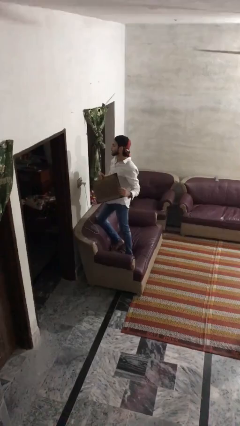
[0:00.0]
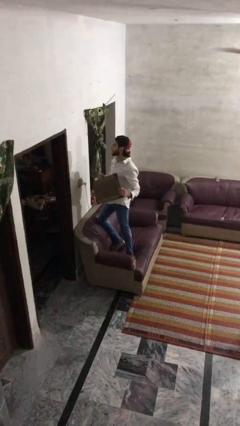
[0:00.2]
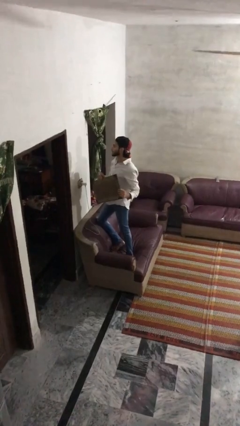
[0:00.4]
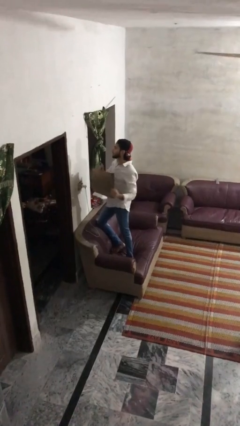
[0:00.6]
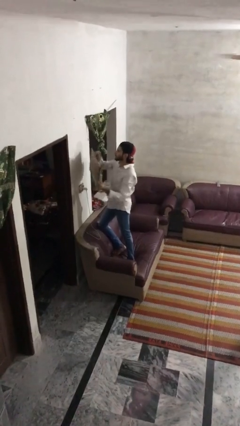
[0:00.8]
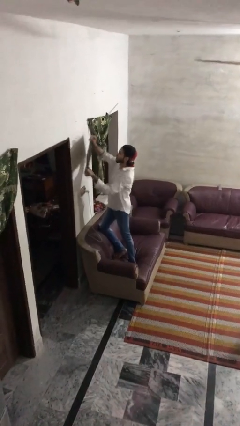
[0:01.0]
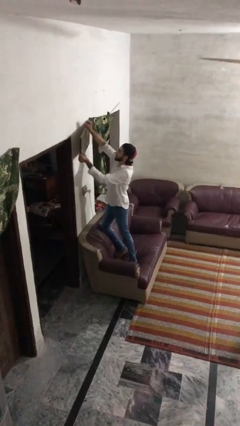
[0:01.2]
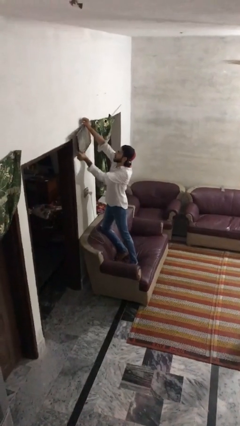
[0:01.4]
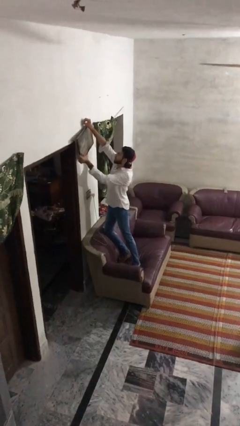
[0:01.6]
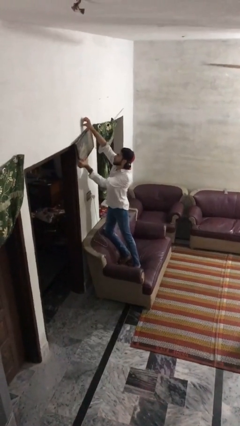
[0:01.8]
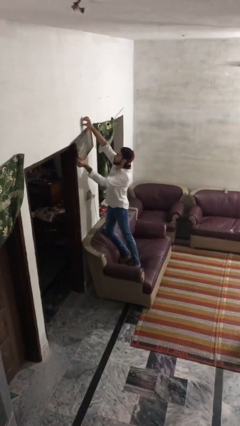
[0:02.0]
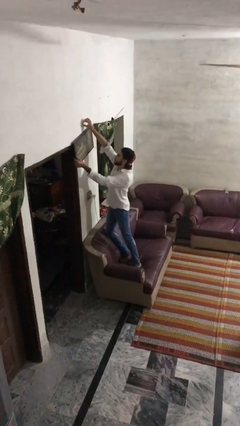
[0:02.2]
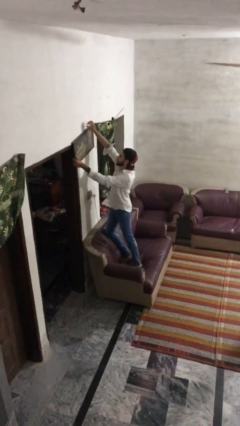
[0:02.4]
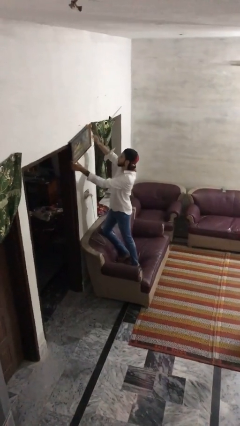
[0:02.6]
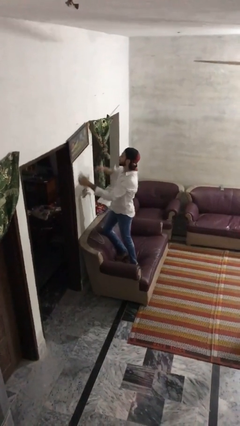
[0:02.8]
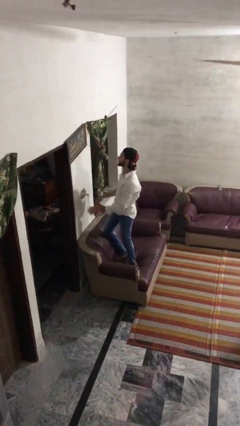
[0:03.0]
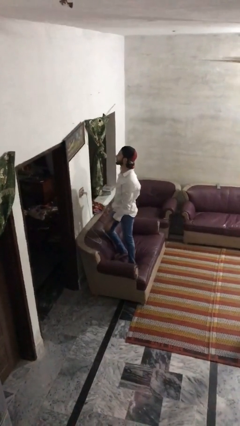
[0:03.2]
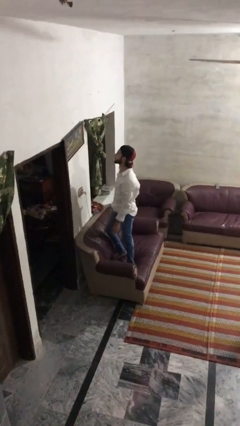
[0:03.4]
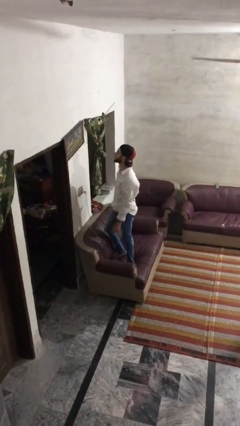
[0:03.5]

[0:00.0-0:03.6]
person puts up picture frame

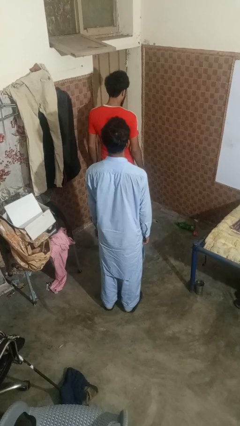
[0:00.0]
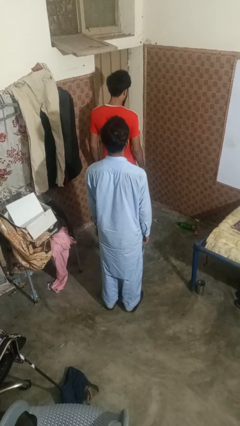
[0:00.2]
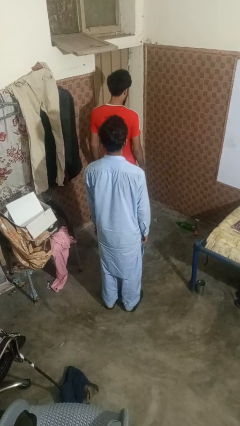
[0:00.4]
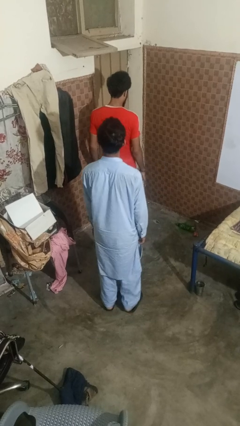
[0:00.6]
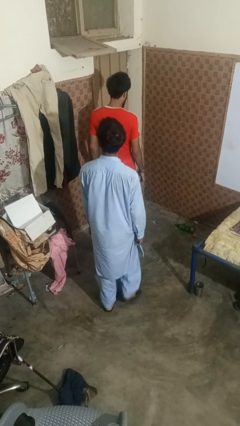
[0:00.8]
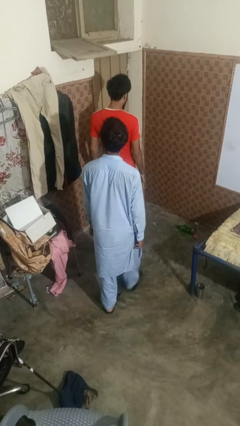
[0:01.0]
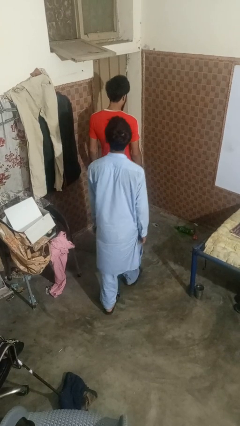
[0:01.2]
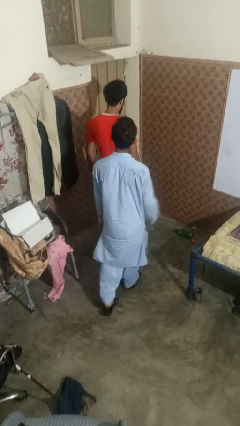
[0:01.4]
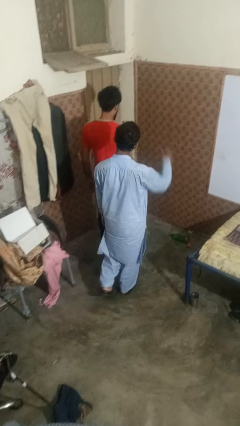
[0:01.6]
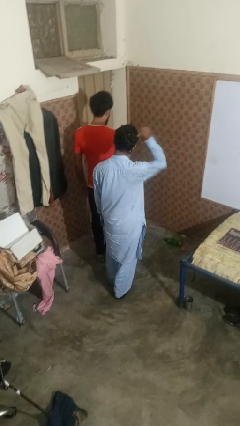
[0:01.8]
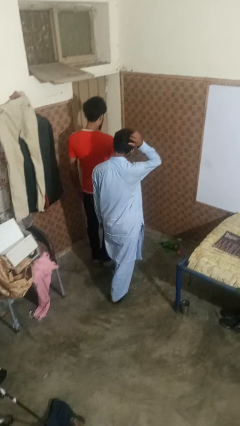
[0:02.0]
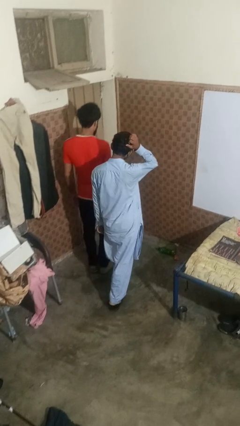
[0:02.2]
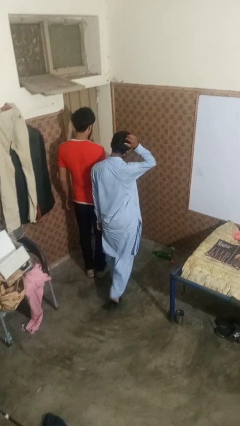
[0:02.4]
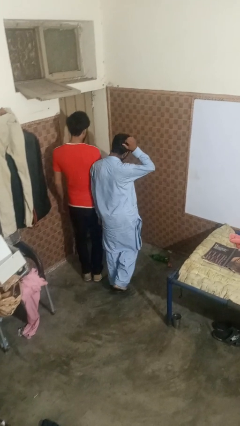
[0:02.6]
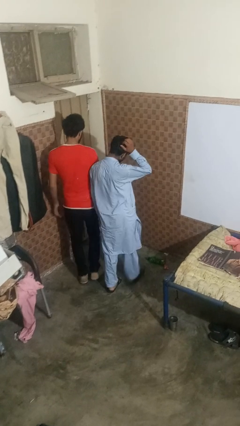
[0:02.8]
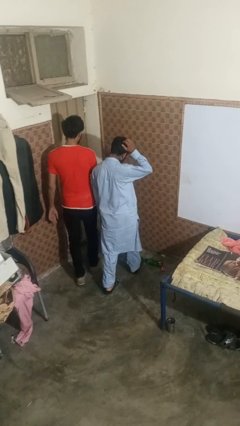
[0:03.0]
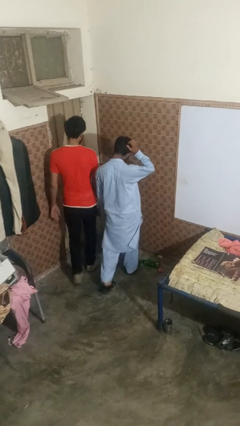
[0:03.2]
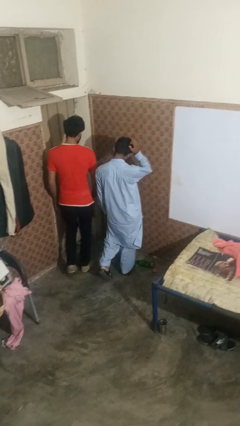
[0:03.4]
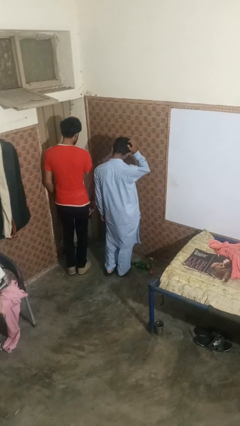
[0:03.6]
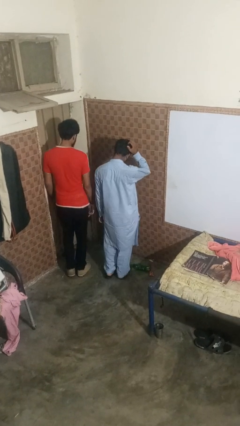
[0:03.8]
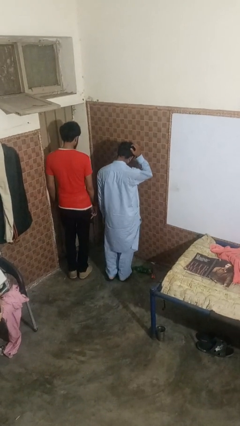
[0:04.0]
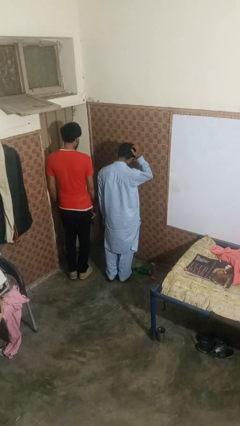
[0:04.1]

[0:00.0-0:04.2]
person bumps into person

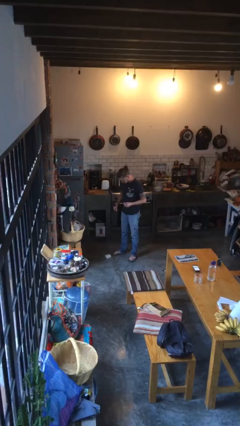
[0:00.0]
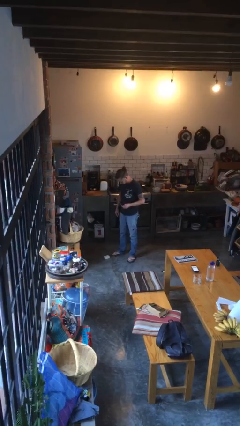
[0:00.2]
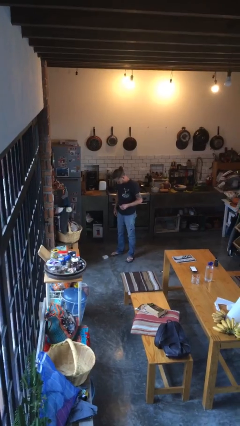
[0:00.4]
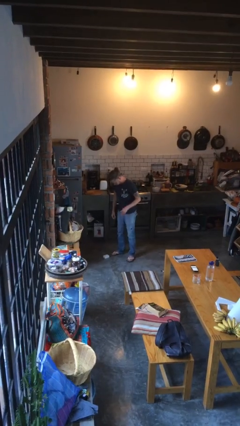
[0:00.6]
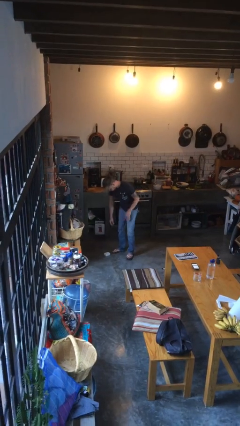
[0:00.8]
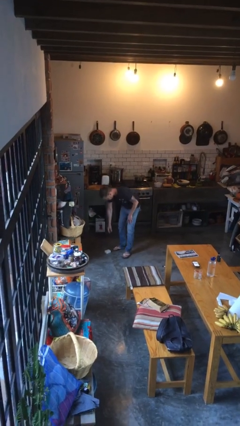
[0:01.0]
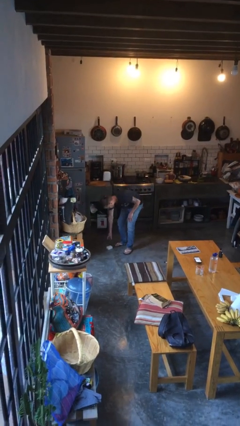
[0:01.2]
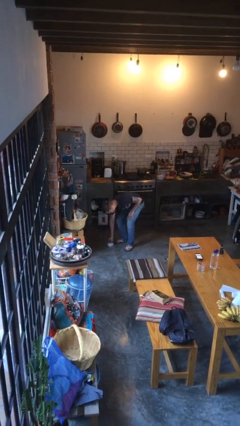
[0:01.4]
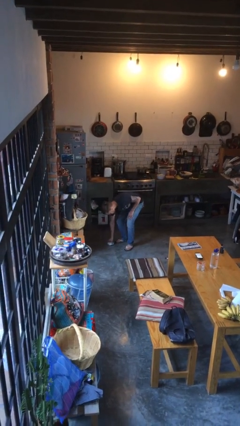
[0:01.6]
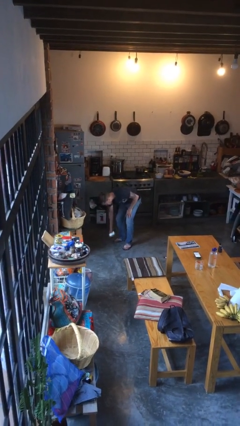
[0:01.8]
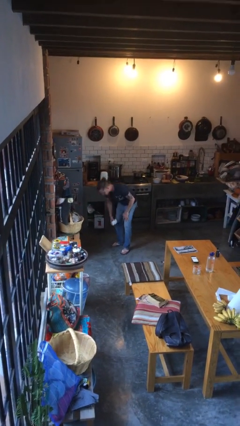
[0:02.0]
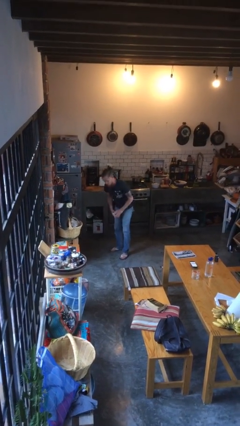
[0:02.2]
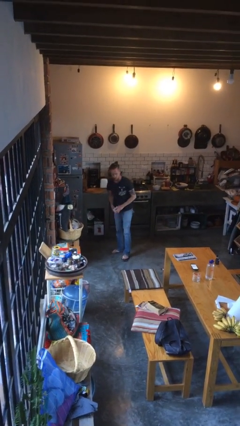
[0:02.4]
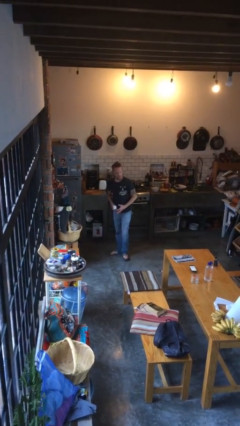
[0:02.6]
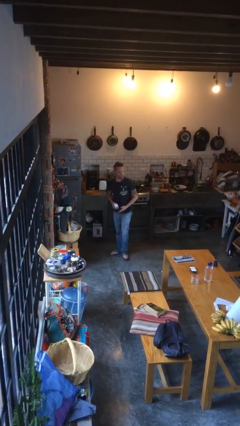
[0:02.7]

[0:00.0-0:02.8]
person picks up object from floor

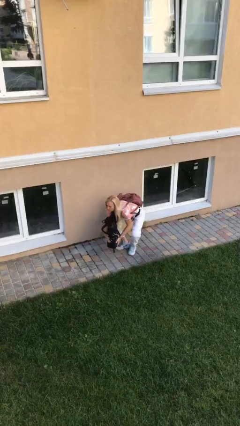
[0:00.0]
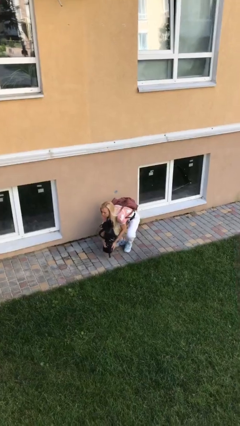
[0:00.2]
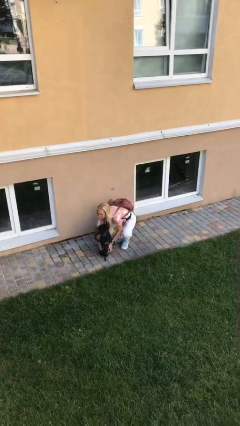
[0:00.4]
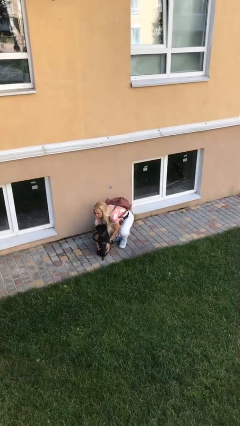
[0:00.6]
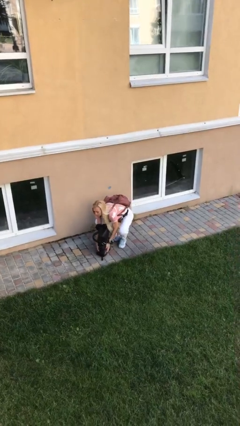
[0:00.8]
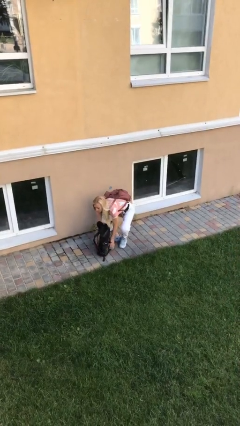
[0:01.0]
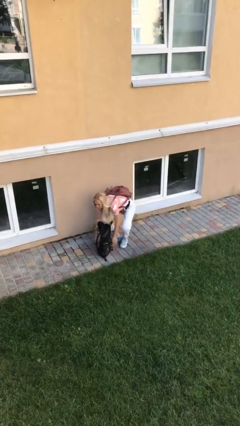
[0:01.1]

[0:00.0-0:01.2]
person puts down object on floor

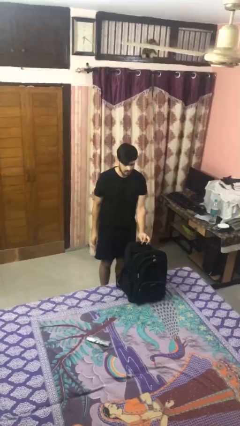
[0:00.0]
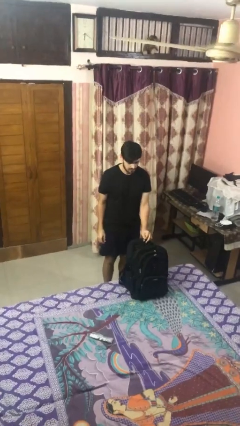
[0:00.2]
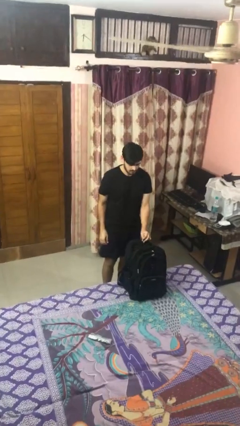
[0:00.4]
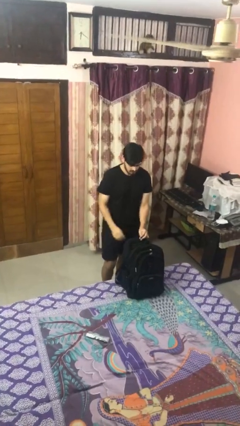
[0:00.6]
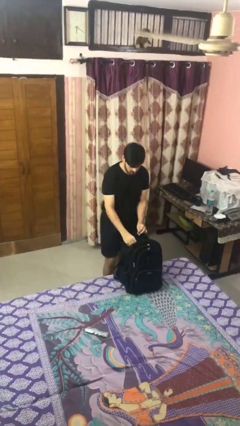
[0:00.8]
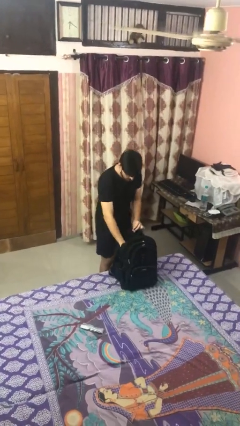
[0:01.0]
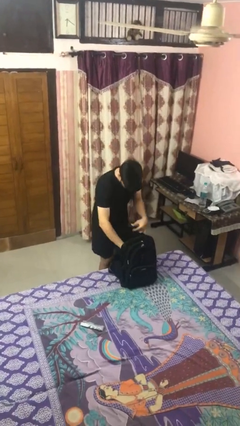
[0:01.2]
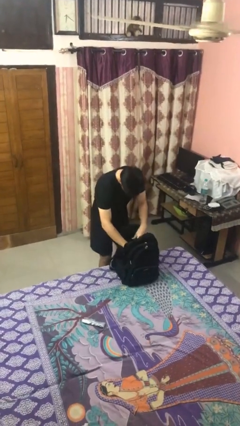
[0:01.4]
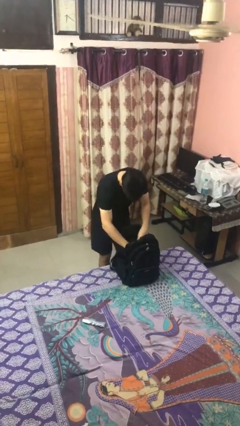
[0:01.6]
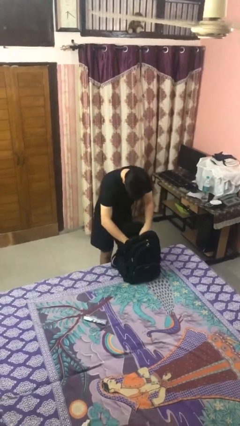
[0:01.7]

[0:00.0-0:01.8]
person searches in backpack

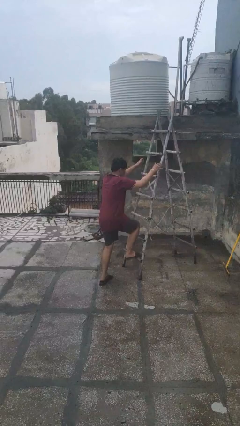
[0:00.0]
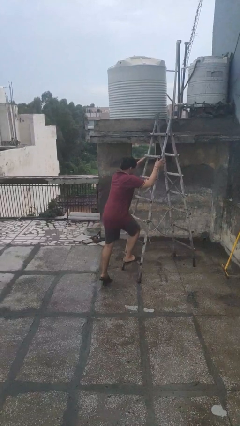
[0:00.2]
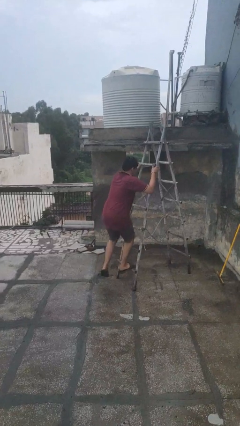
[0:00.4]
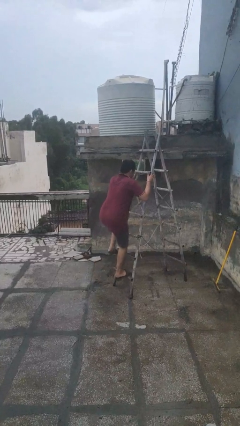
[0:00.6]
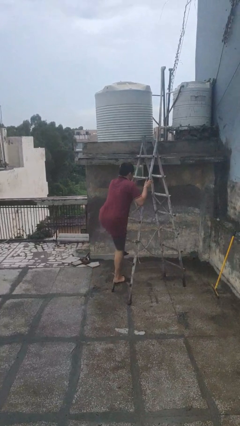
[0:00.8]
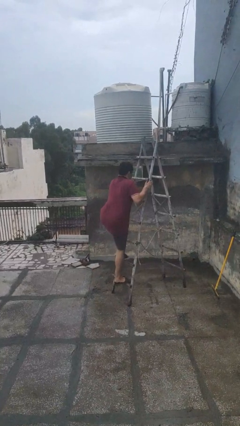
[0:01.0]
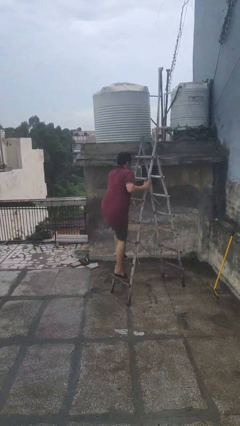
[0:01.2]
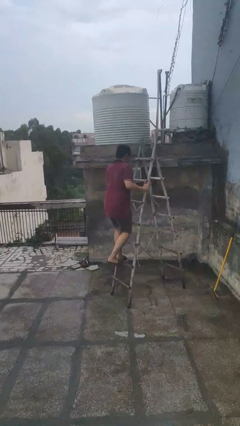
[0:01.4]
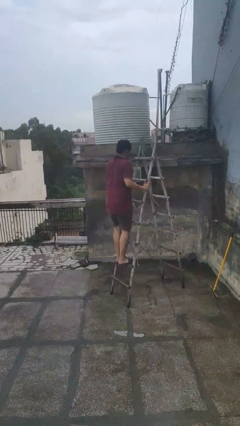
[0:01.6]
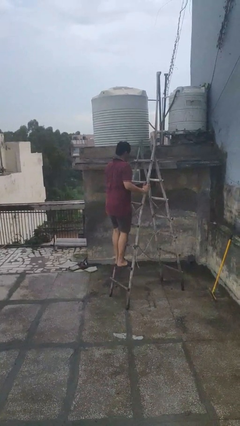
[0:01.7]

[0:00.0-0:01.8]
person climbs up ladder

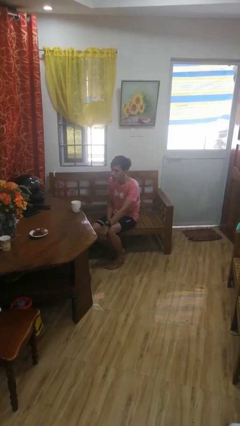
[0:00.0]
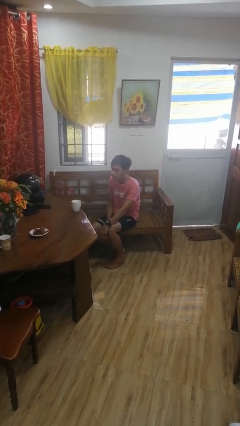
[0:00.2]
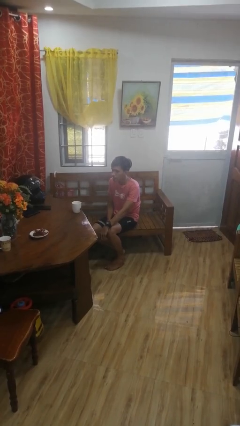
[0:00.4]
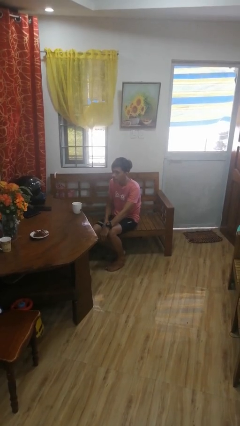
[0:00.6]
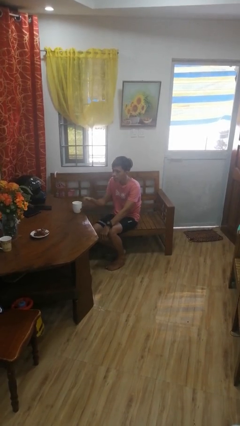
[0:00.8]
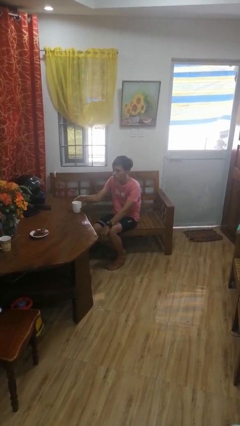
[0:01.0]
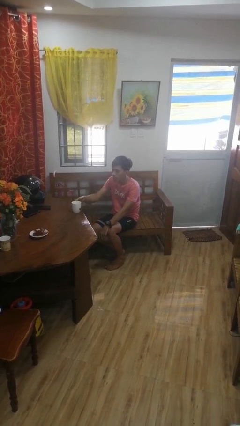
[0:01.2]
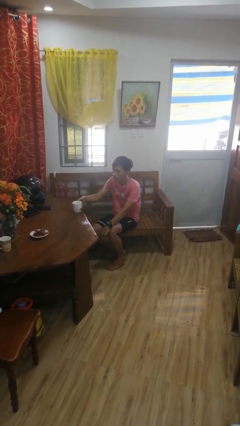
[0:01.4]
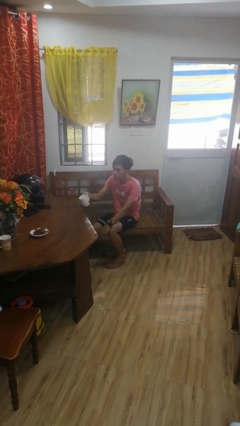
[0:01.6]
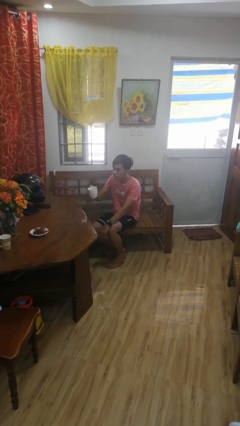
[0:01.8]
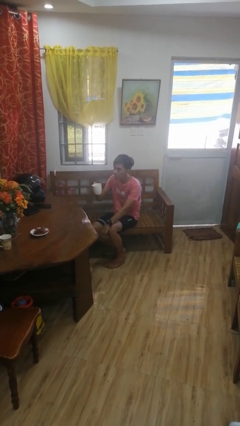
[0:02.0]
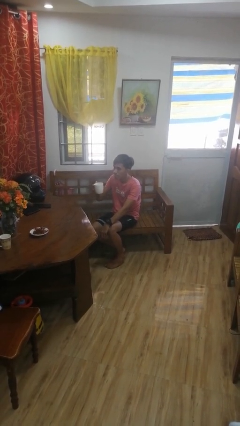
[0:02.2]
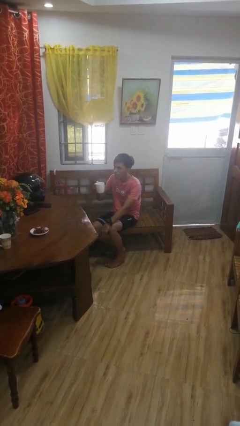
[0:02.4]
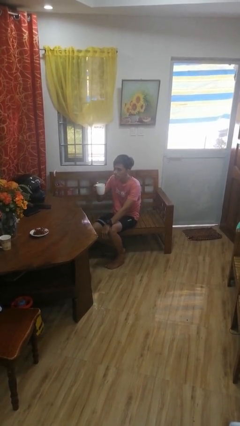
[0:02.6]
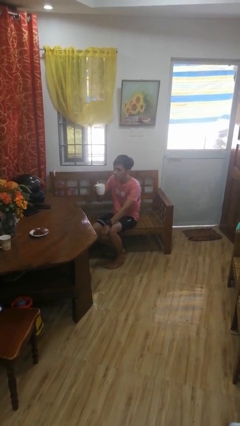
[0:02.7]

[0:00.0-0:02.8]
person picks up object from table
